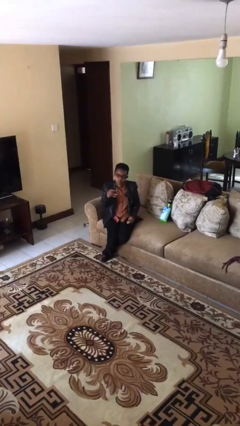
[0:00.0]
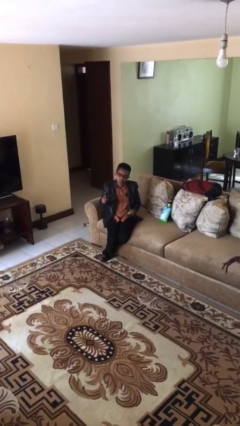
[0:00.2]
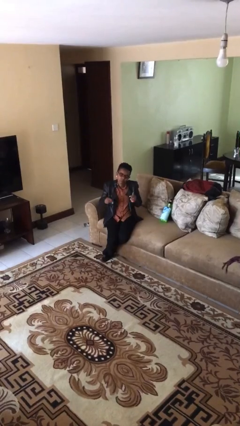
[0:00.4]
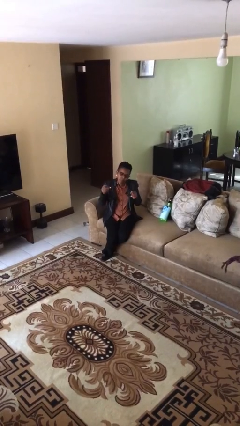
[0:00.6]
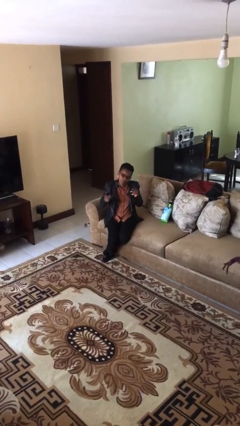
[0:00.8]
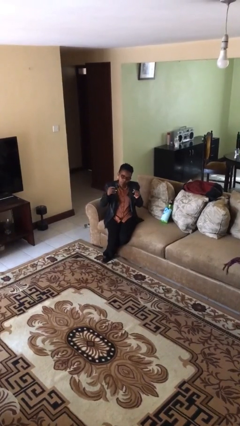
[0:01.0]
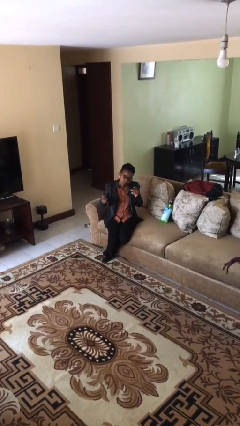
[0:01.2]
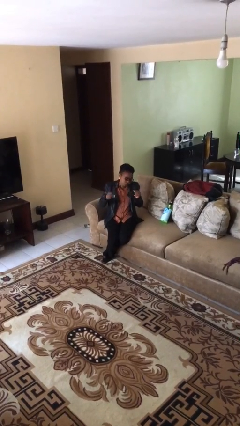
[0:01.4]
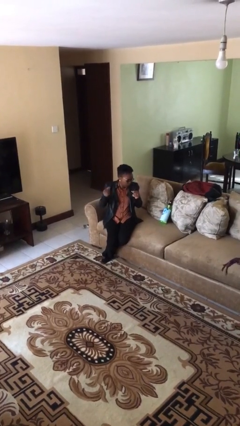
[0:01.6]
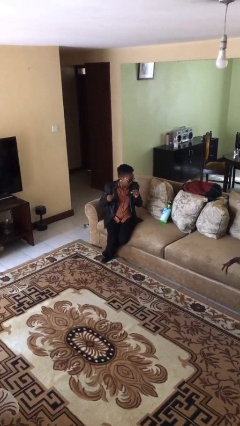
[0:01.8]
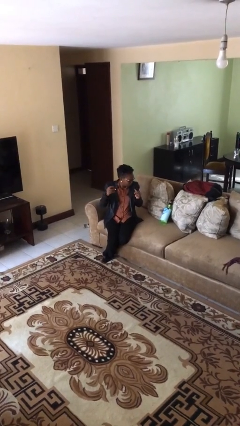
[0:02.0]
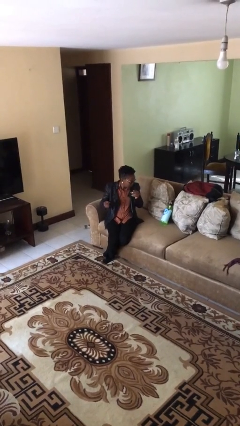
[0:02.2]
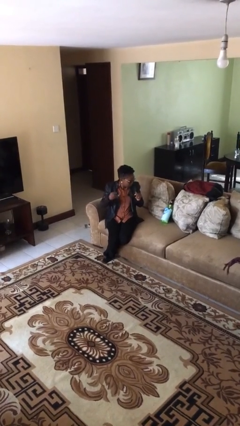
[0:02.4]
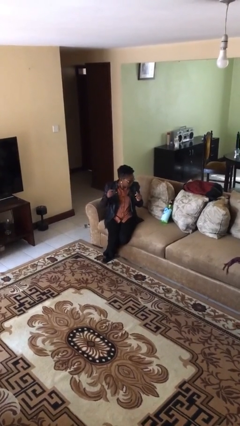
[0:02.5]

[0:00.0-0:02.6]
person snaps fingers

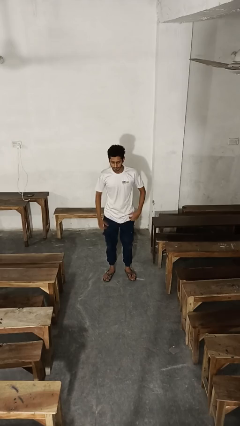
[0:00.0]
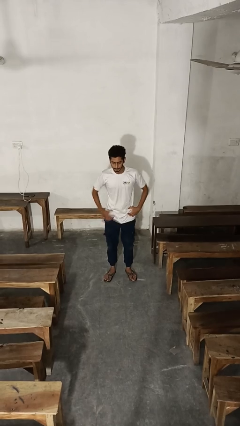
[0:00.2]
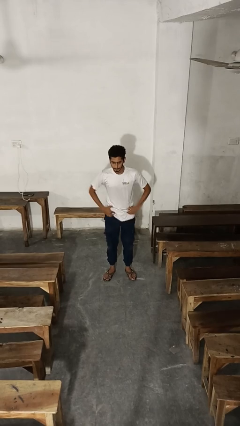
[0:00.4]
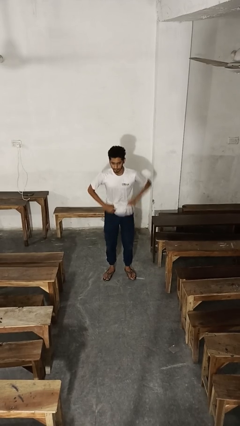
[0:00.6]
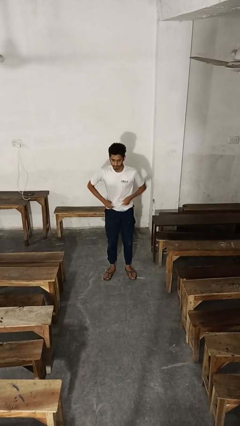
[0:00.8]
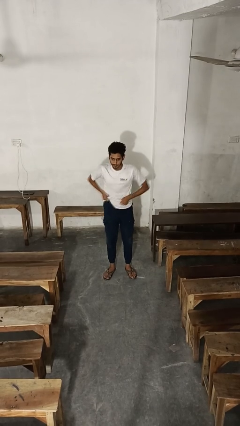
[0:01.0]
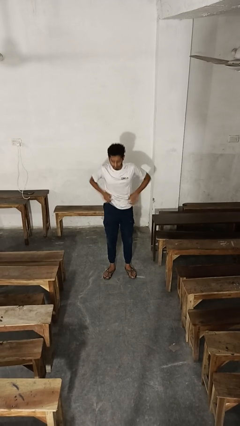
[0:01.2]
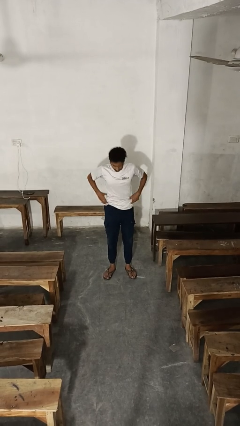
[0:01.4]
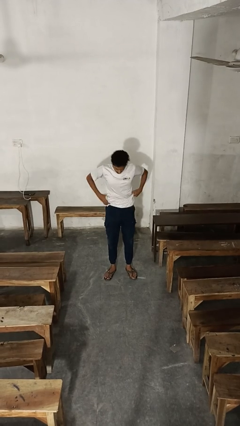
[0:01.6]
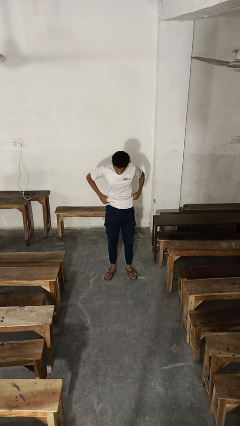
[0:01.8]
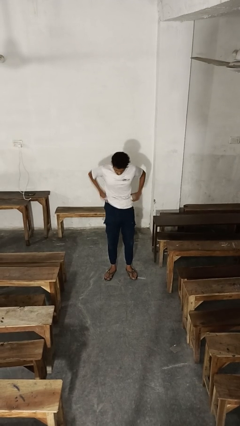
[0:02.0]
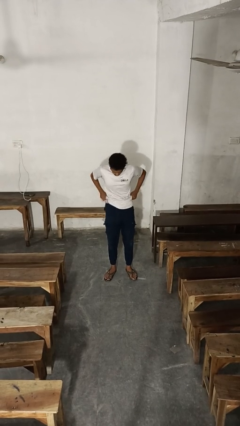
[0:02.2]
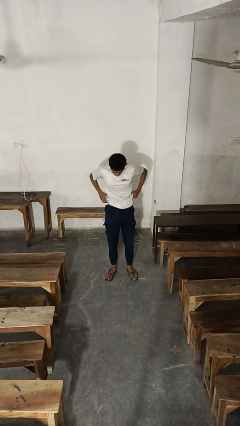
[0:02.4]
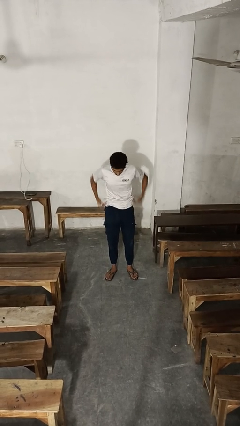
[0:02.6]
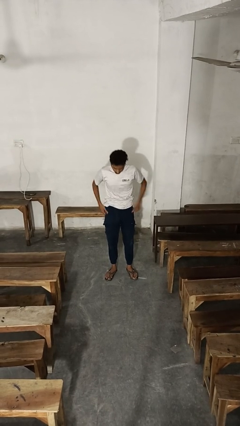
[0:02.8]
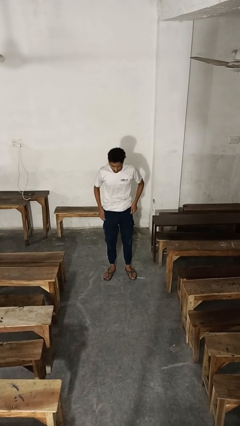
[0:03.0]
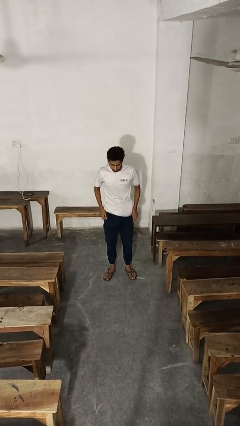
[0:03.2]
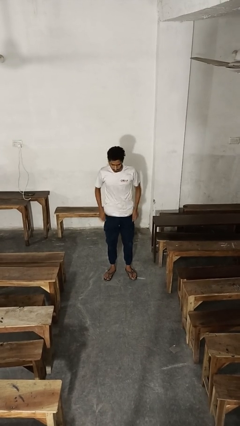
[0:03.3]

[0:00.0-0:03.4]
person hikes up pants

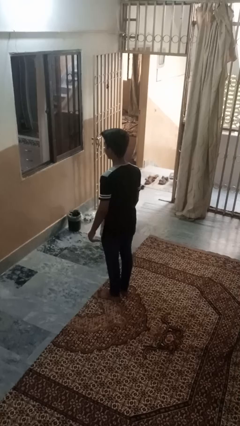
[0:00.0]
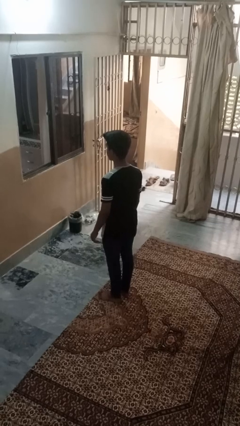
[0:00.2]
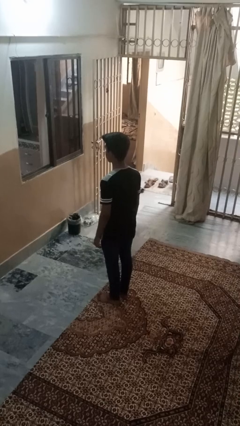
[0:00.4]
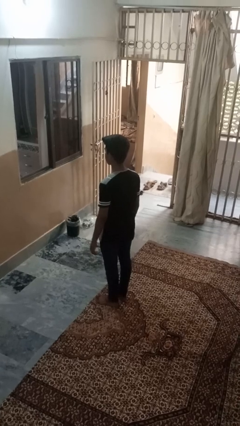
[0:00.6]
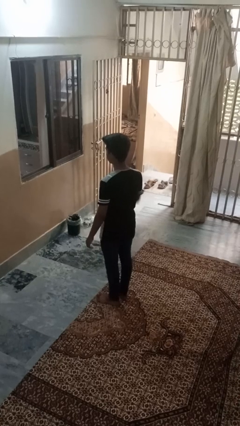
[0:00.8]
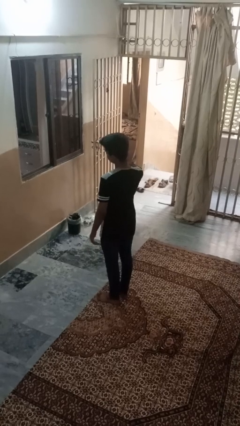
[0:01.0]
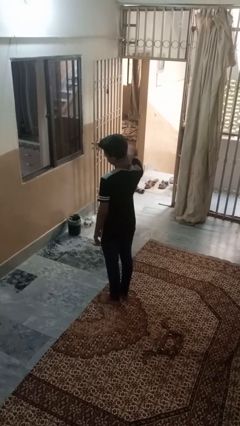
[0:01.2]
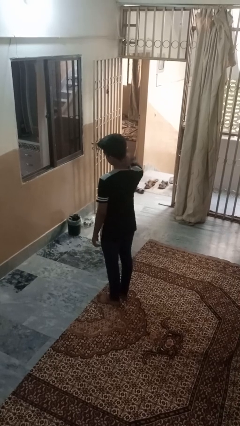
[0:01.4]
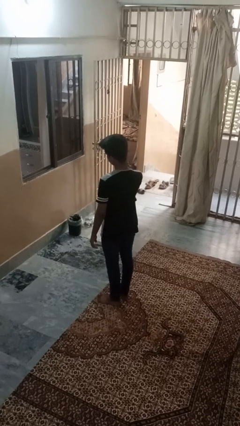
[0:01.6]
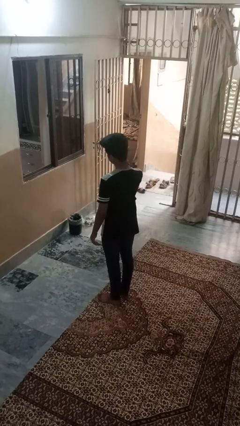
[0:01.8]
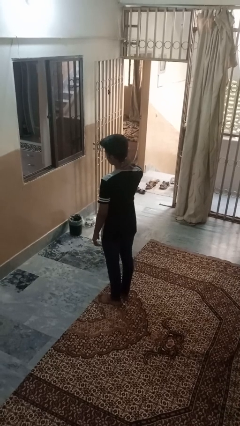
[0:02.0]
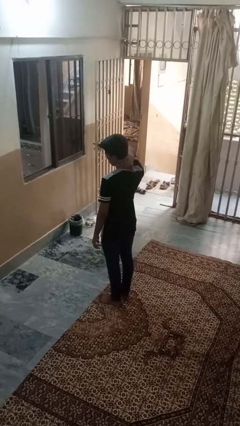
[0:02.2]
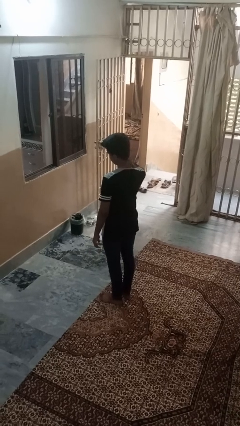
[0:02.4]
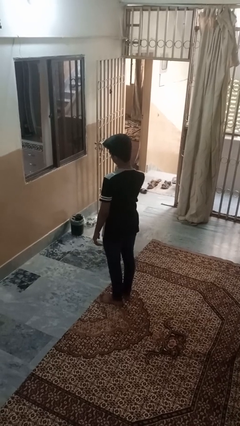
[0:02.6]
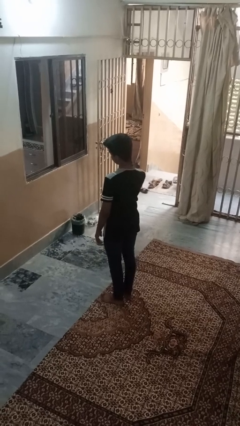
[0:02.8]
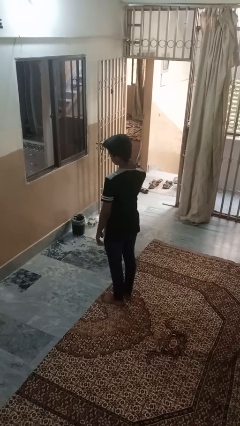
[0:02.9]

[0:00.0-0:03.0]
person rubs neck

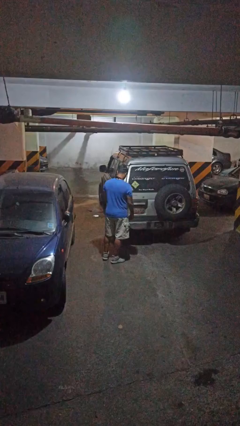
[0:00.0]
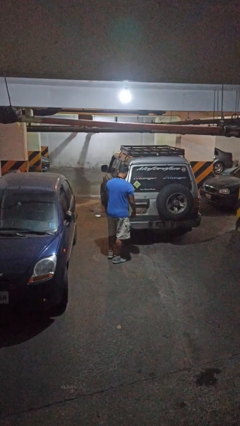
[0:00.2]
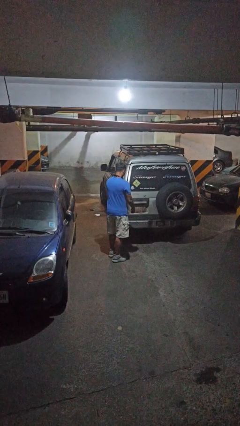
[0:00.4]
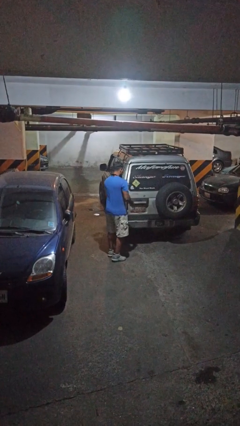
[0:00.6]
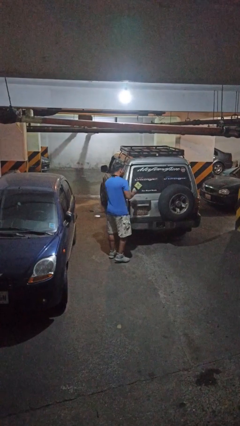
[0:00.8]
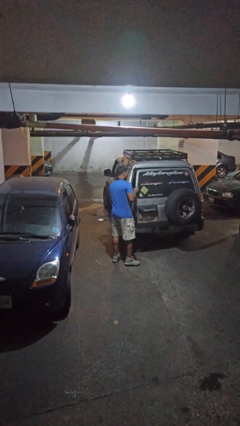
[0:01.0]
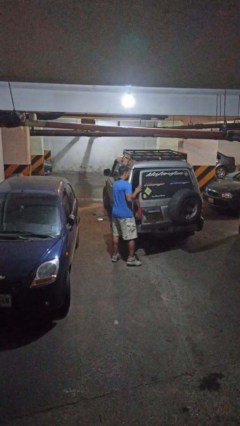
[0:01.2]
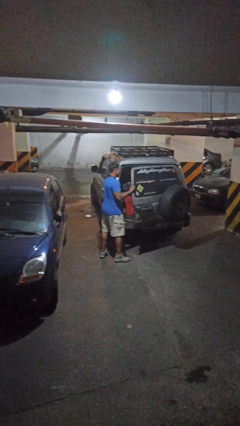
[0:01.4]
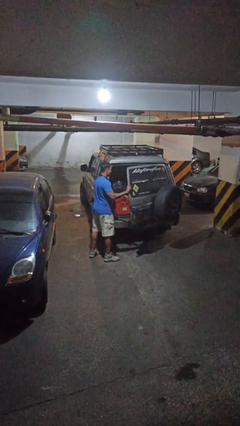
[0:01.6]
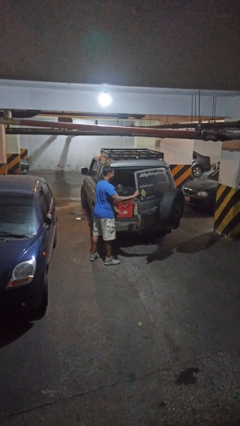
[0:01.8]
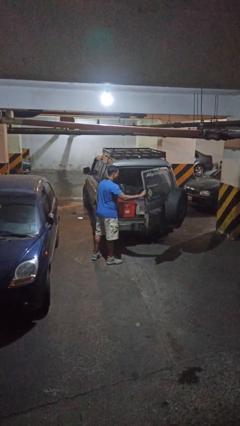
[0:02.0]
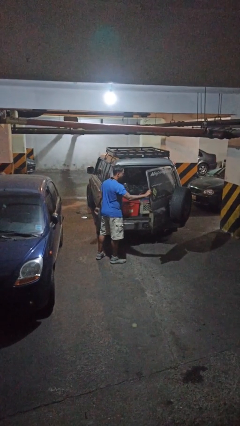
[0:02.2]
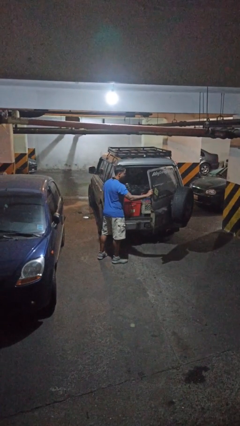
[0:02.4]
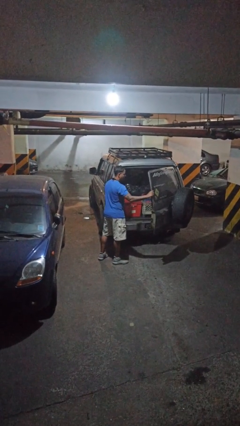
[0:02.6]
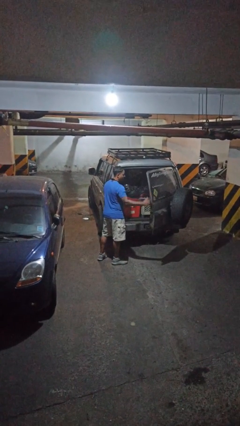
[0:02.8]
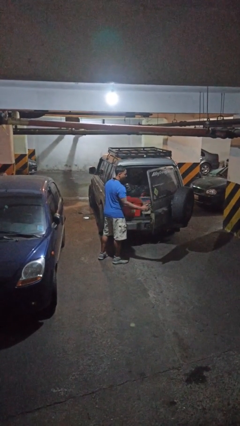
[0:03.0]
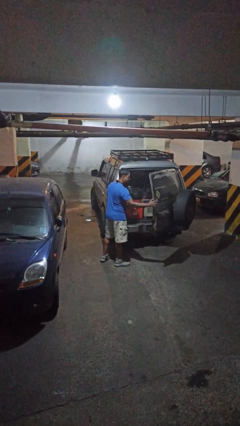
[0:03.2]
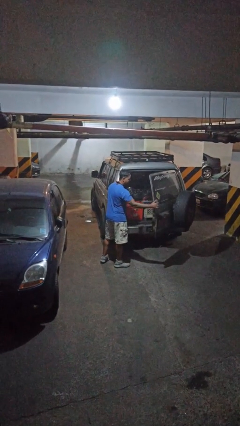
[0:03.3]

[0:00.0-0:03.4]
person opens car trunk

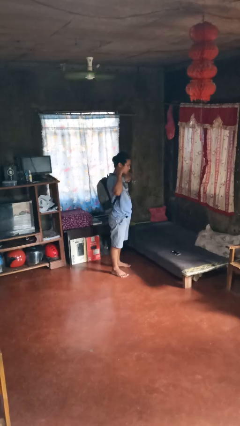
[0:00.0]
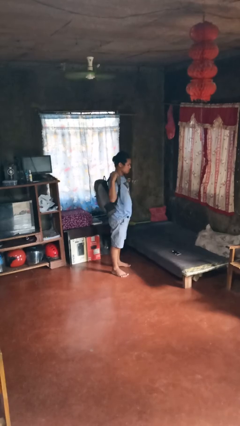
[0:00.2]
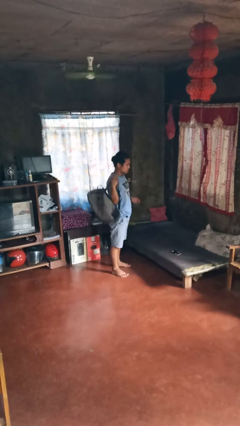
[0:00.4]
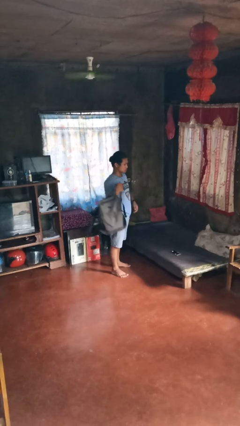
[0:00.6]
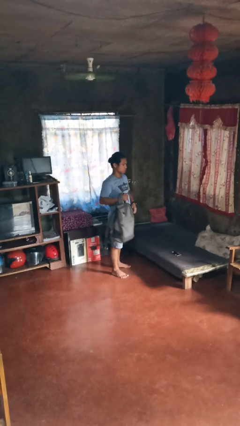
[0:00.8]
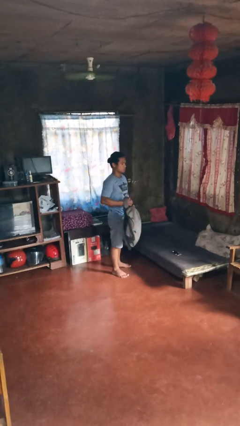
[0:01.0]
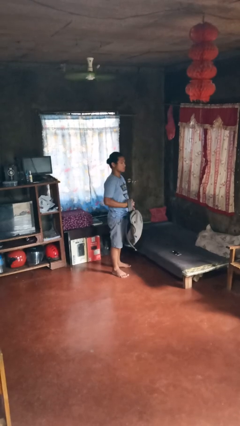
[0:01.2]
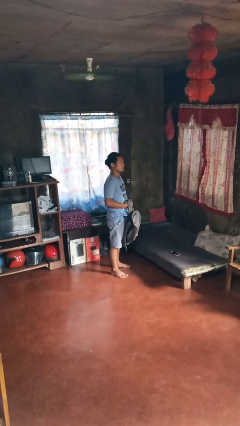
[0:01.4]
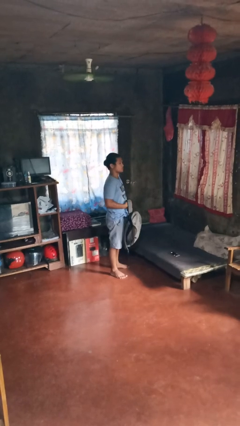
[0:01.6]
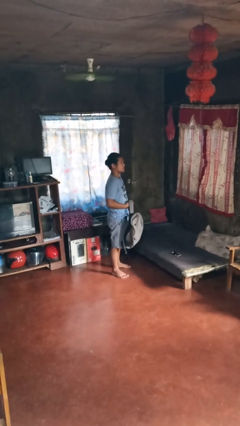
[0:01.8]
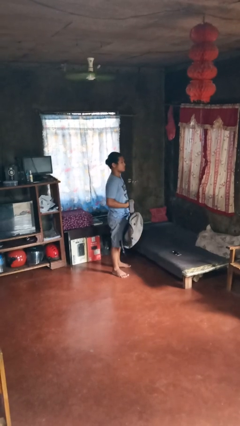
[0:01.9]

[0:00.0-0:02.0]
person takes off backpack

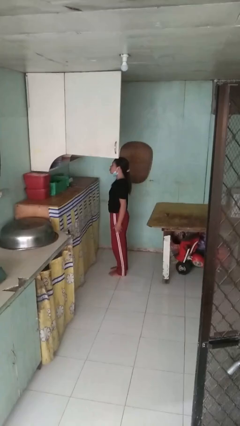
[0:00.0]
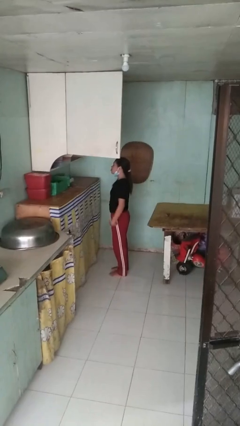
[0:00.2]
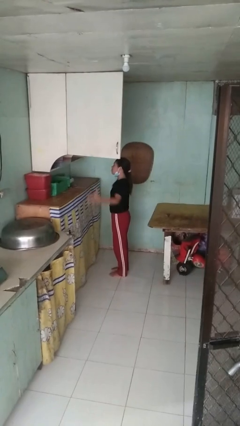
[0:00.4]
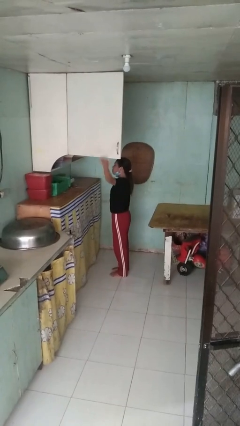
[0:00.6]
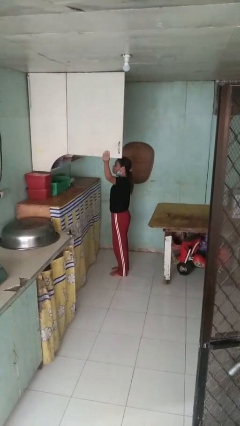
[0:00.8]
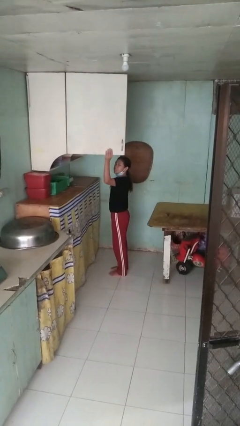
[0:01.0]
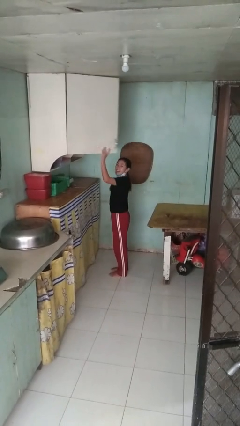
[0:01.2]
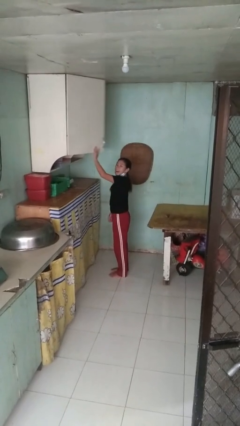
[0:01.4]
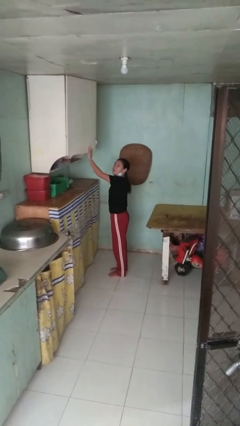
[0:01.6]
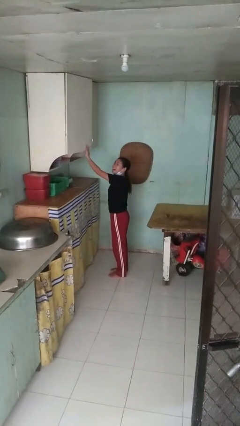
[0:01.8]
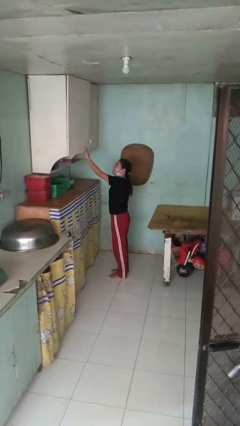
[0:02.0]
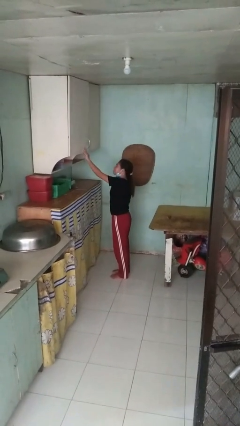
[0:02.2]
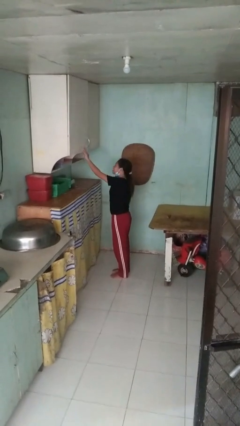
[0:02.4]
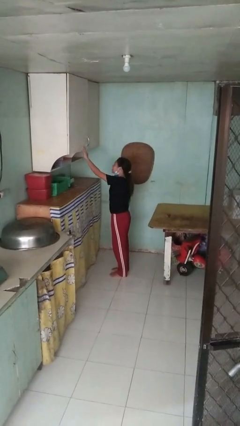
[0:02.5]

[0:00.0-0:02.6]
person closes cabinet
